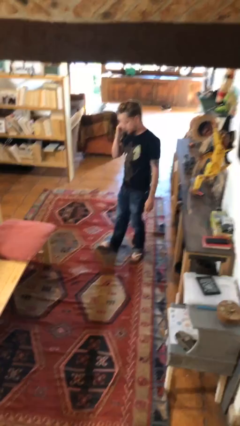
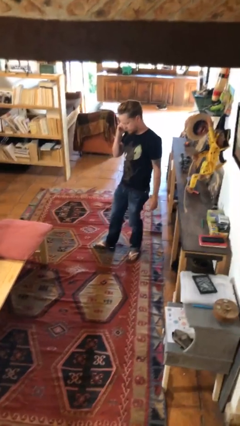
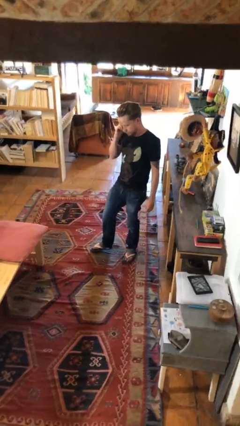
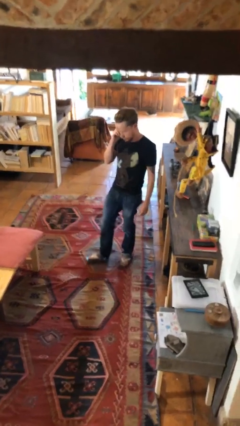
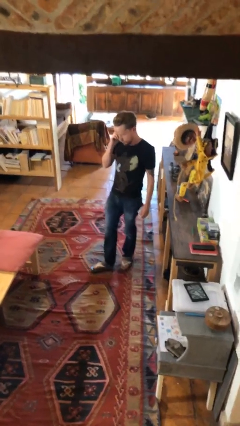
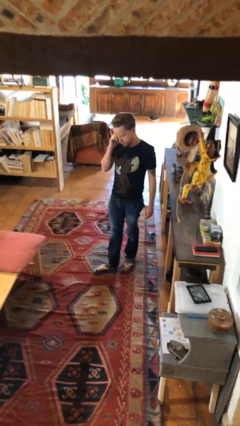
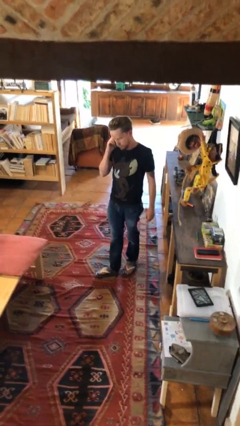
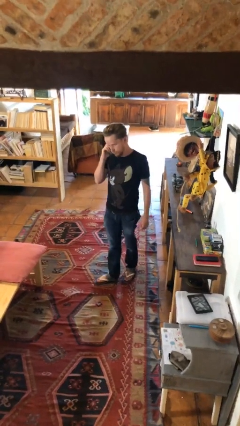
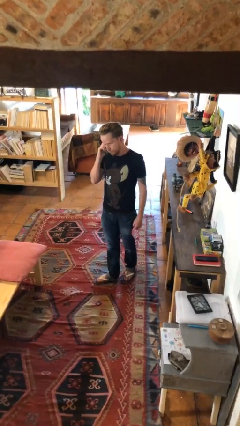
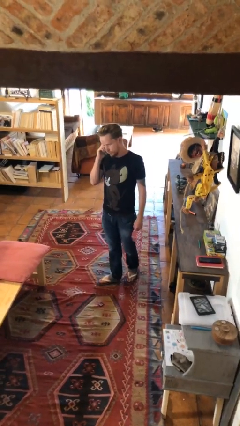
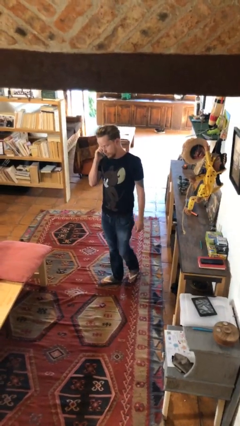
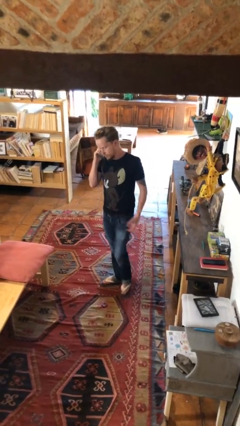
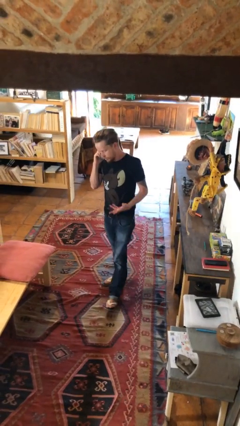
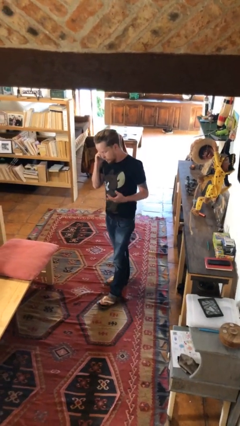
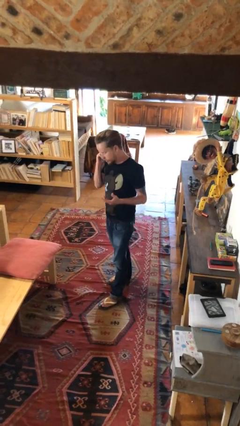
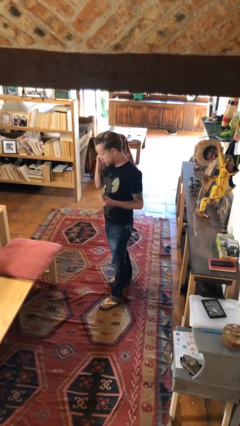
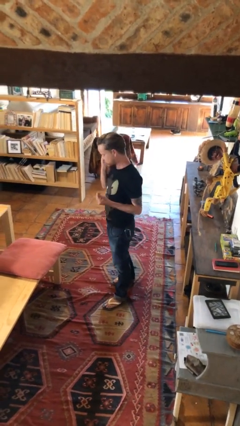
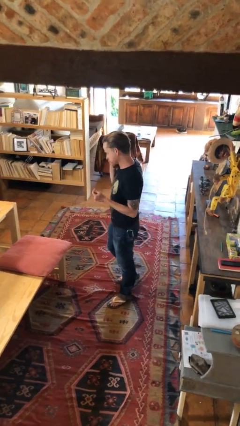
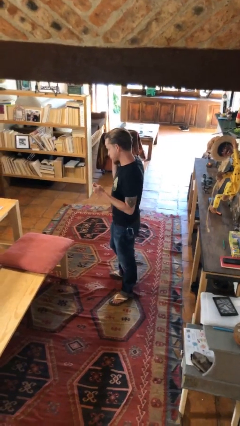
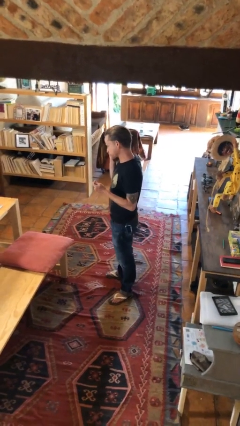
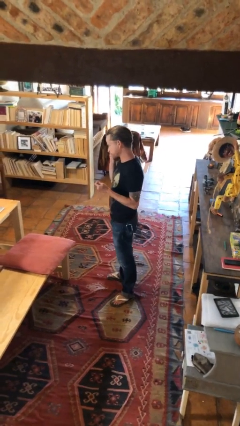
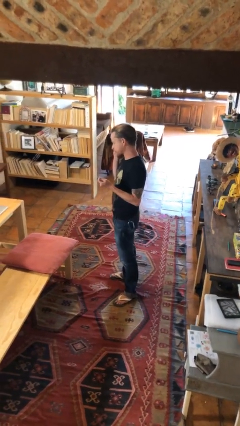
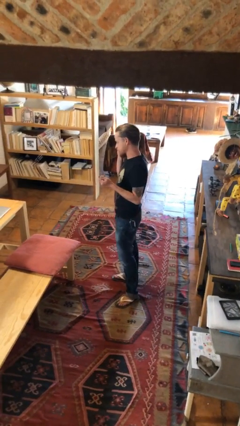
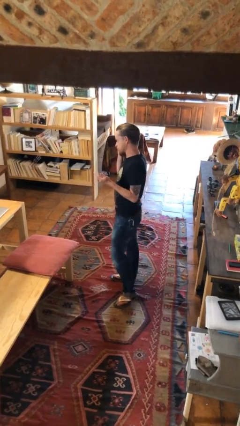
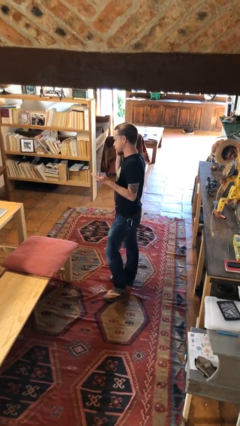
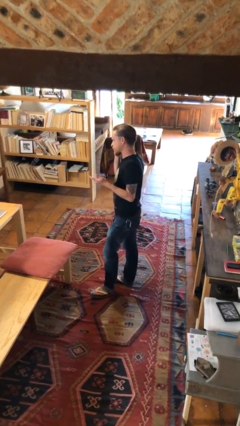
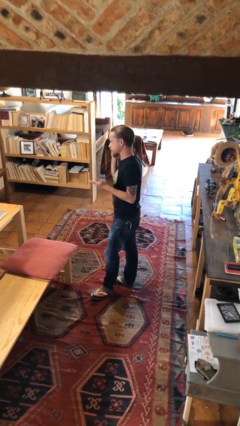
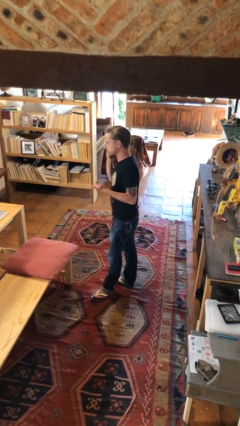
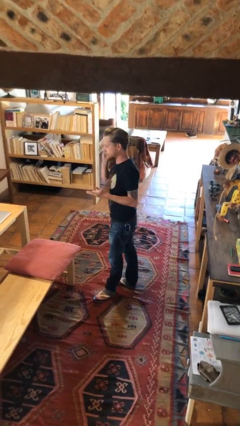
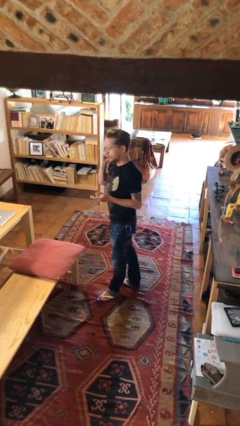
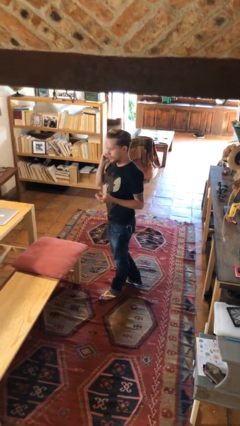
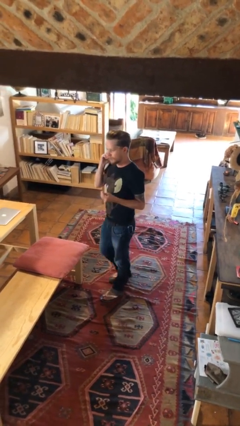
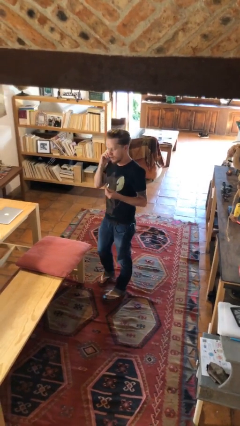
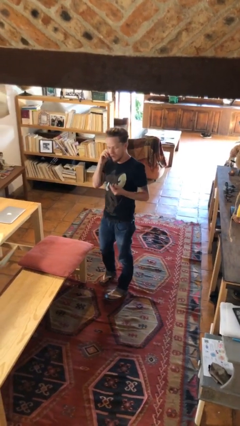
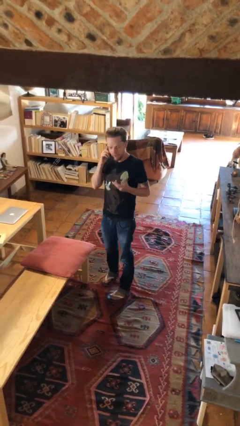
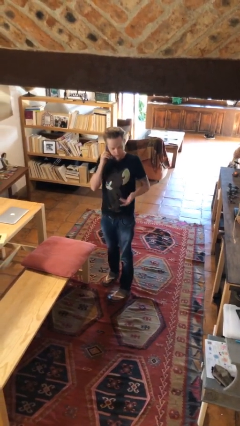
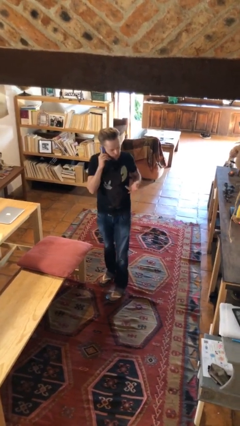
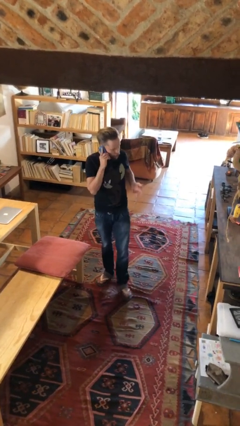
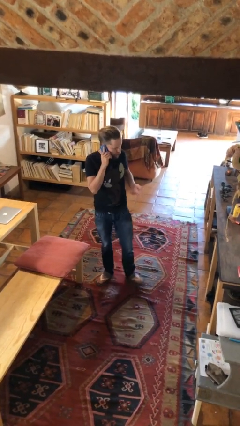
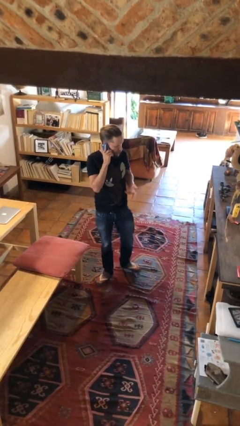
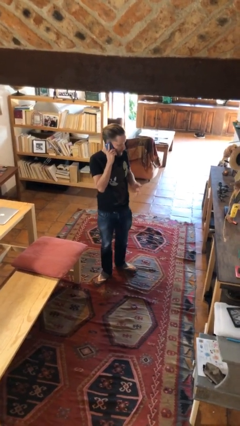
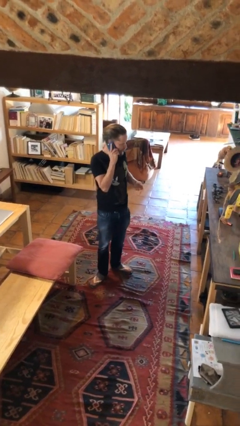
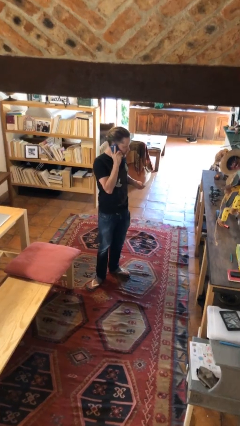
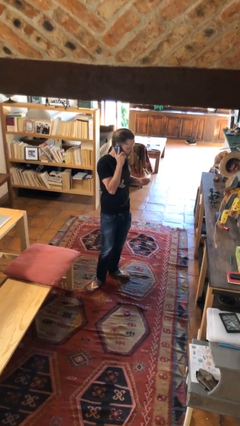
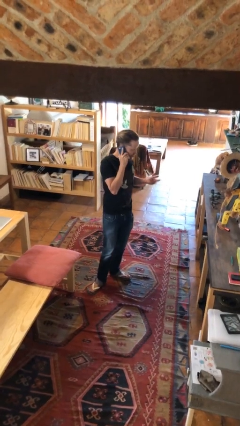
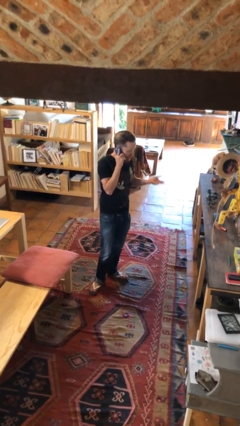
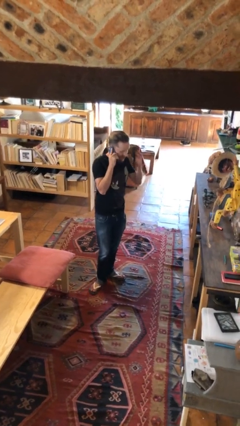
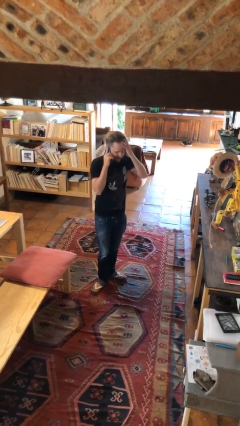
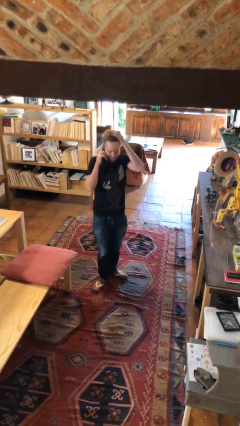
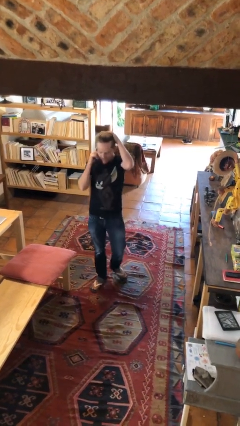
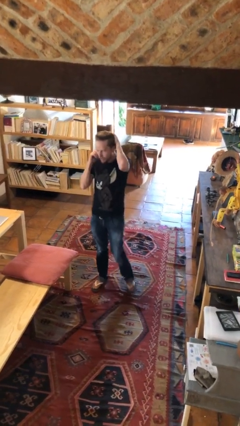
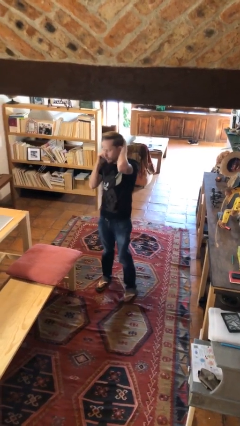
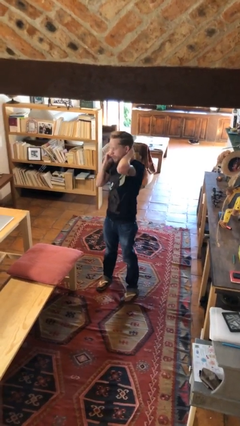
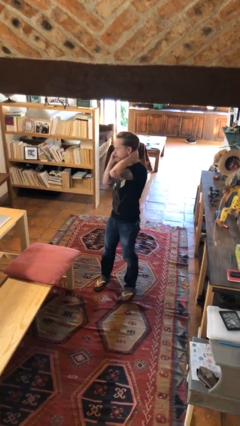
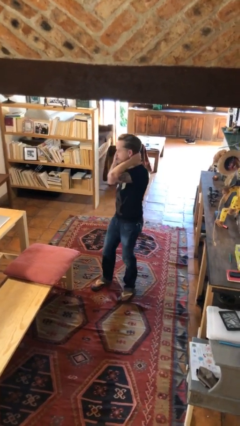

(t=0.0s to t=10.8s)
person talks on phone

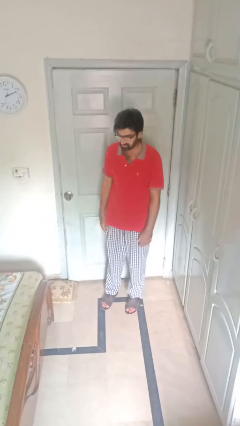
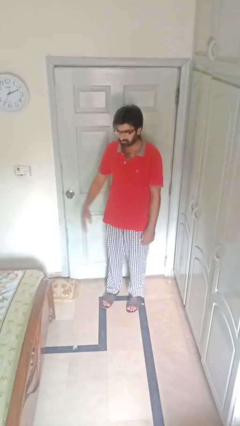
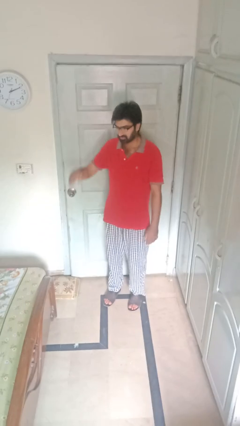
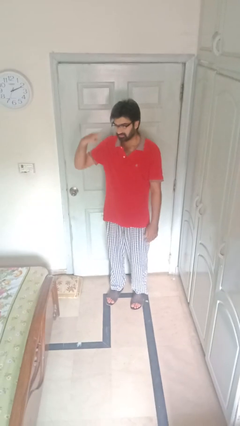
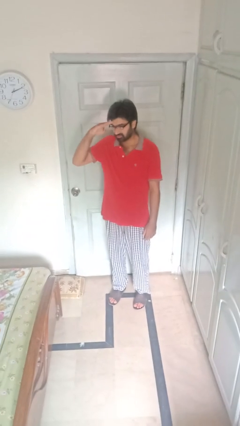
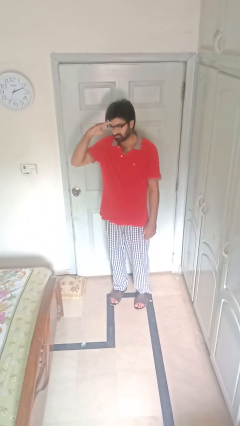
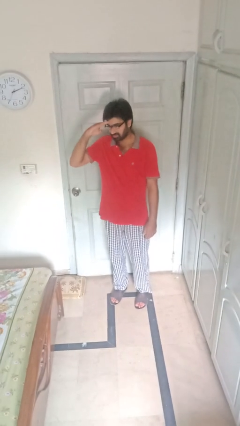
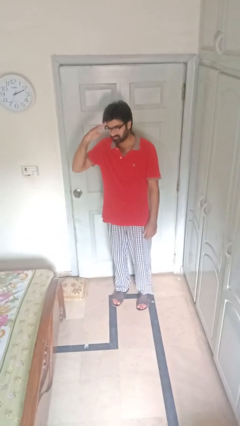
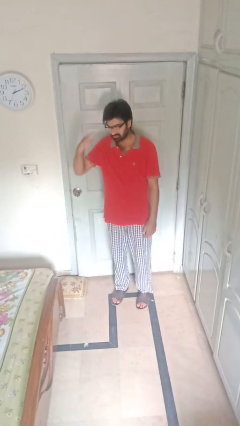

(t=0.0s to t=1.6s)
person salutes

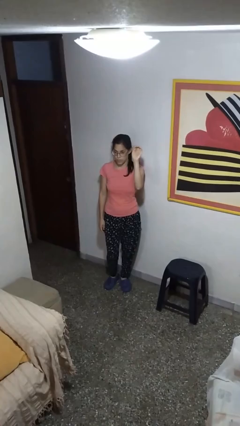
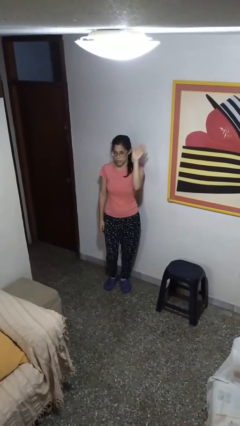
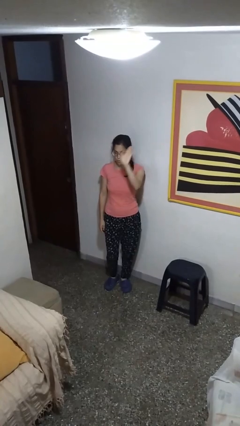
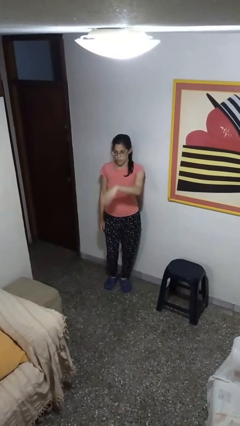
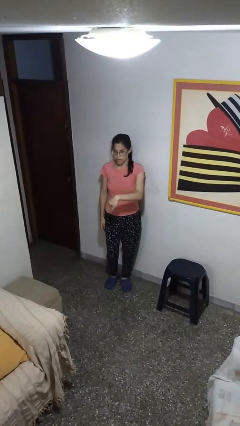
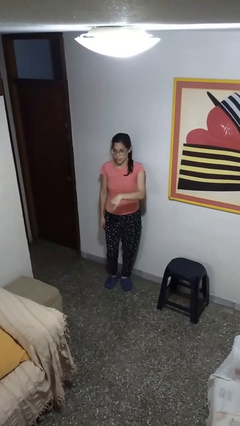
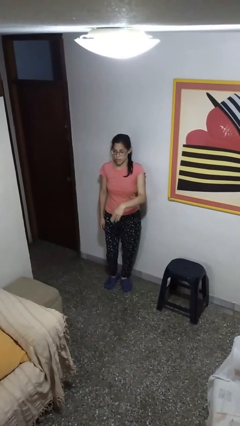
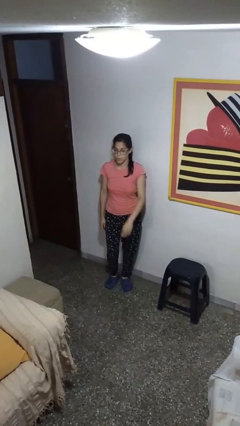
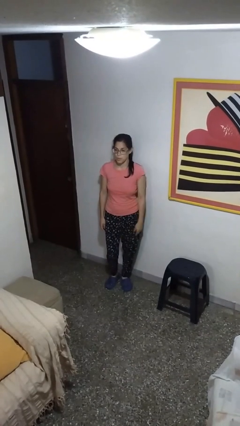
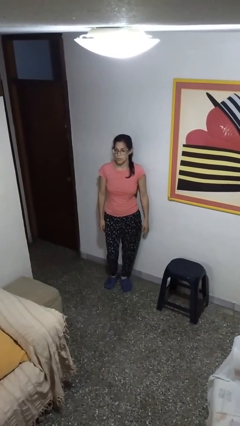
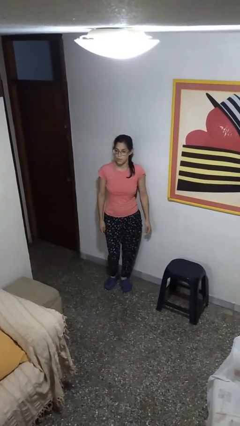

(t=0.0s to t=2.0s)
person gestures swipe down

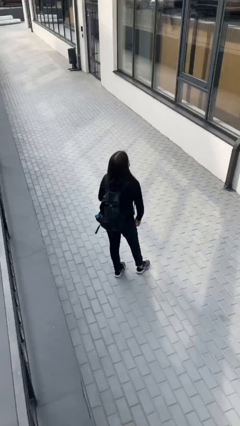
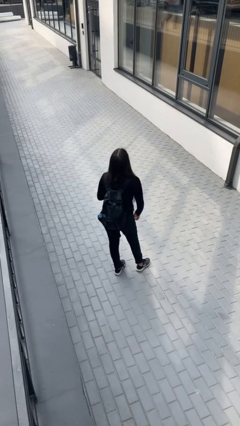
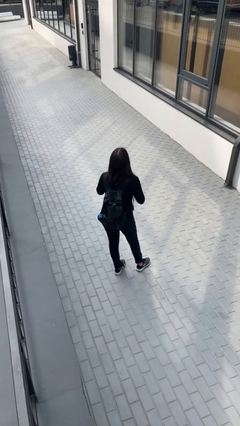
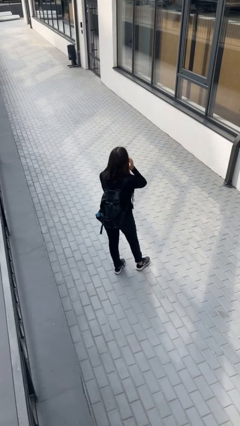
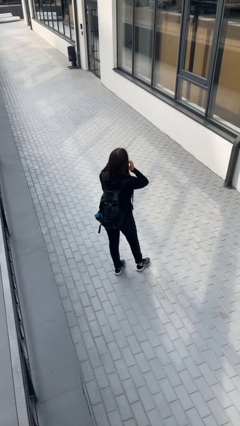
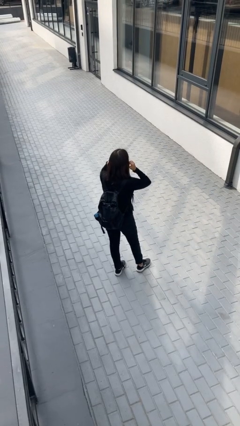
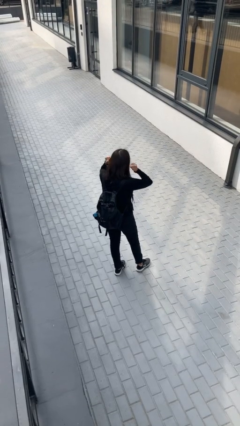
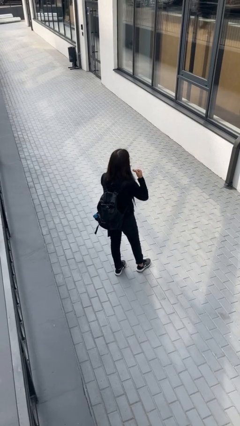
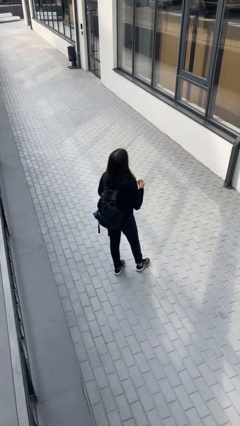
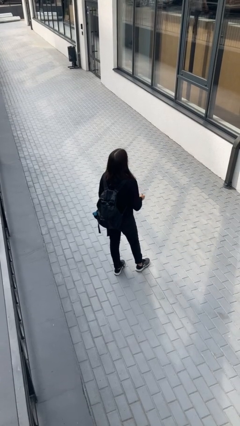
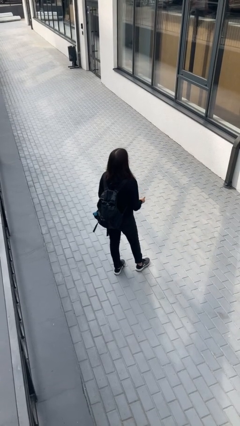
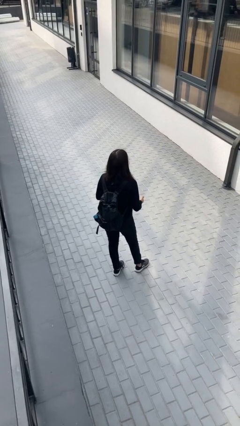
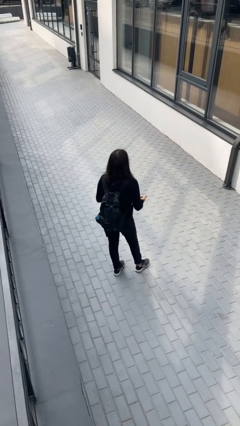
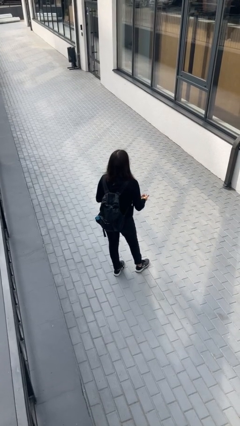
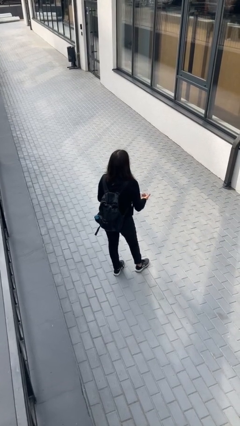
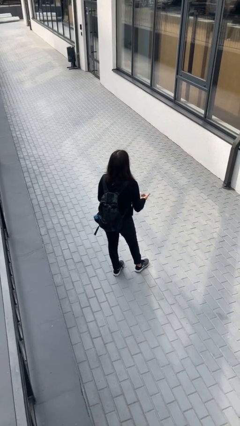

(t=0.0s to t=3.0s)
person takes off facemask
